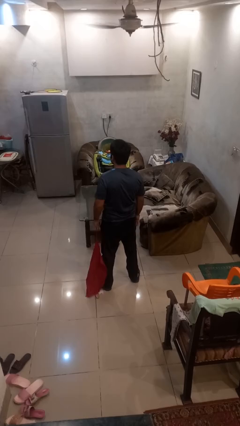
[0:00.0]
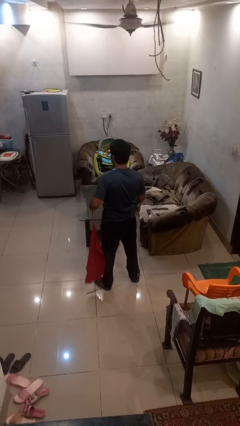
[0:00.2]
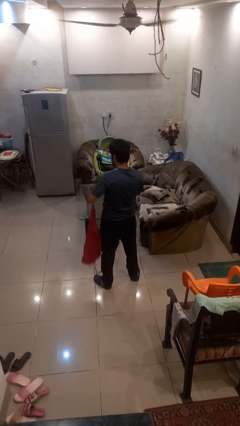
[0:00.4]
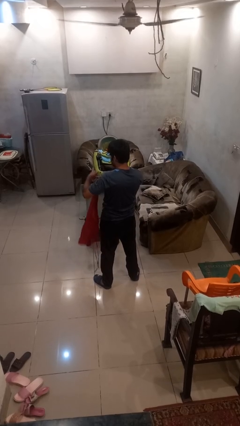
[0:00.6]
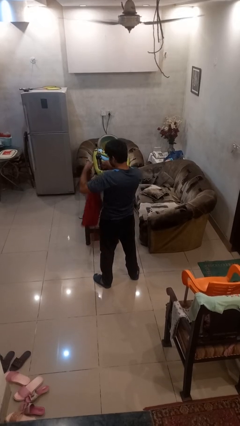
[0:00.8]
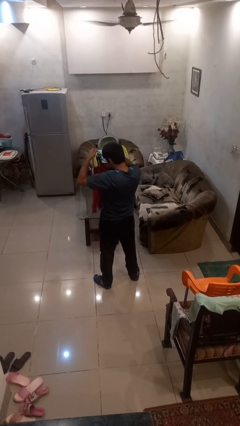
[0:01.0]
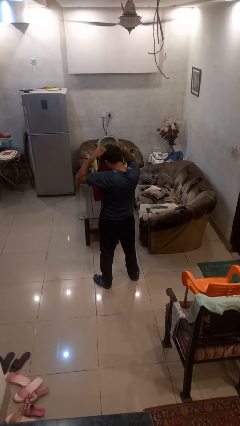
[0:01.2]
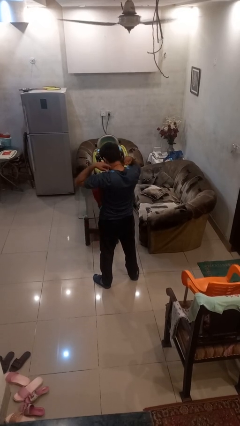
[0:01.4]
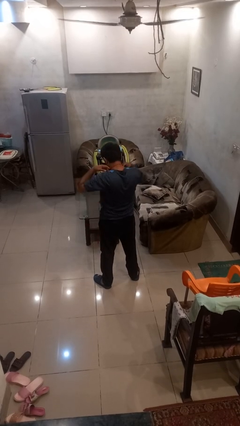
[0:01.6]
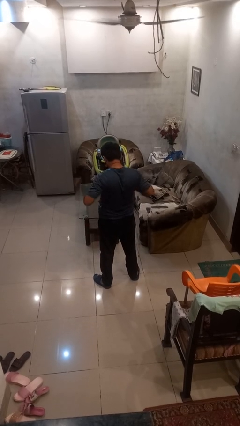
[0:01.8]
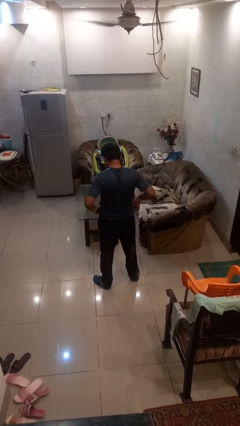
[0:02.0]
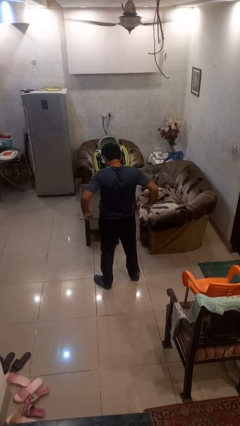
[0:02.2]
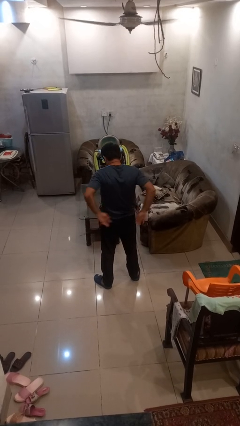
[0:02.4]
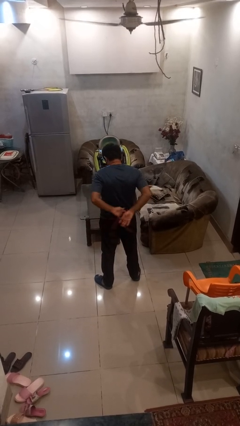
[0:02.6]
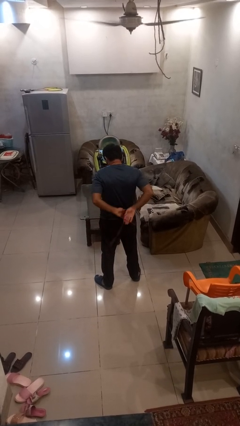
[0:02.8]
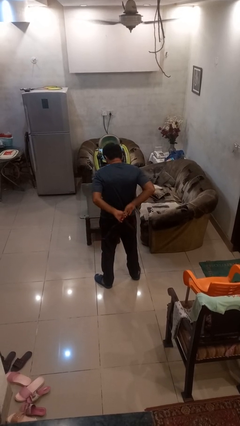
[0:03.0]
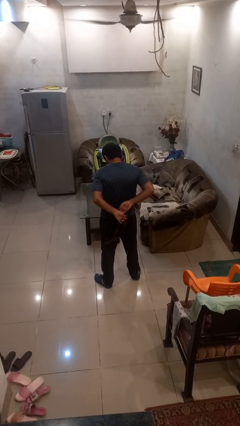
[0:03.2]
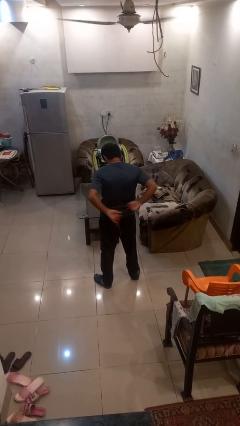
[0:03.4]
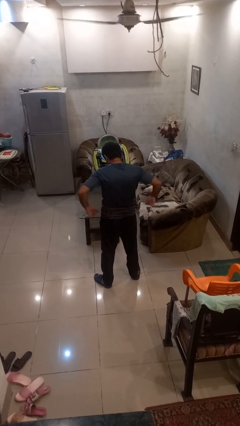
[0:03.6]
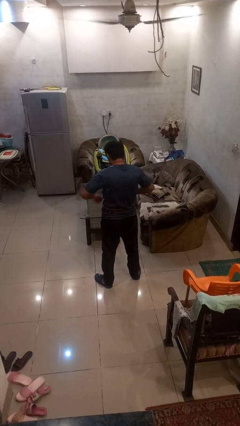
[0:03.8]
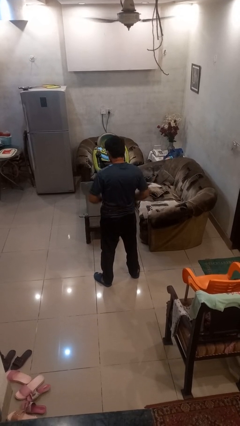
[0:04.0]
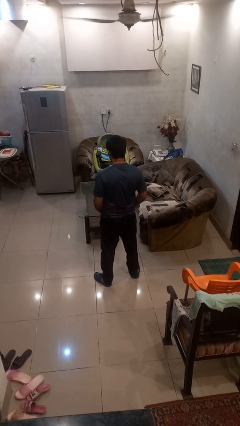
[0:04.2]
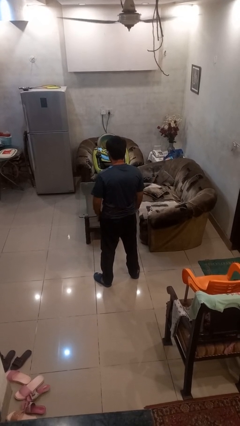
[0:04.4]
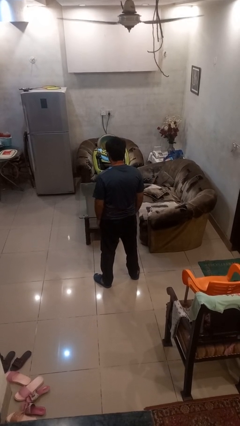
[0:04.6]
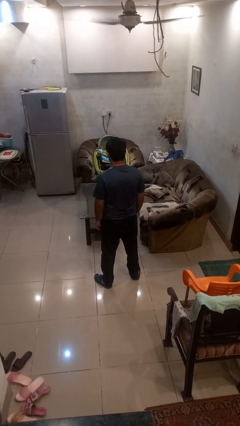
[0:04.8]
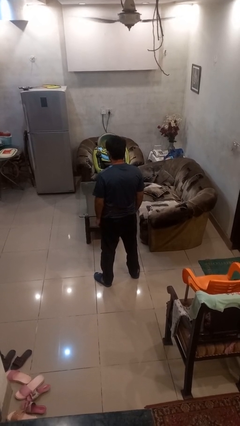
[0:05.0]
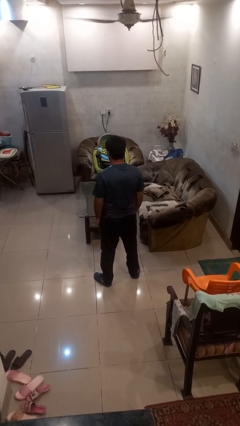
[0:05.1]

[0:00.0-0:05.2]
person puts on apron

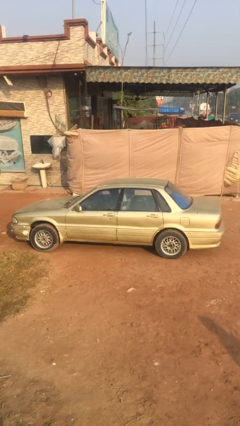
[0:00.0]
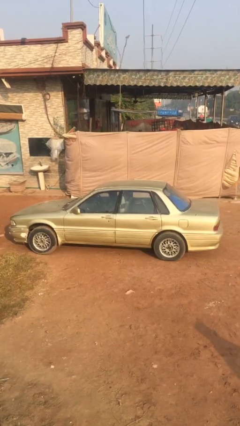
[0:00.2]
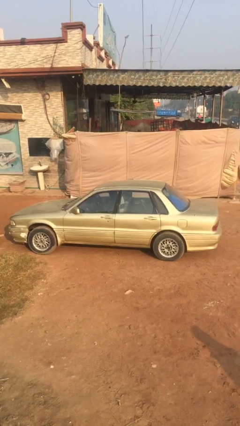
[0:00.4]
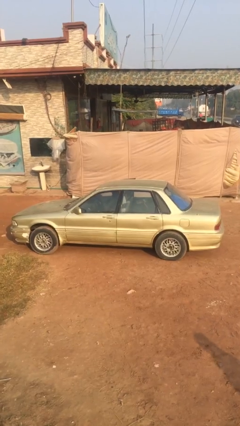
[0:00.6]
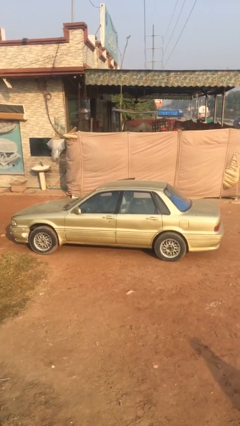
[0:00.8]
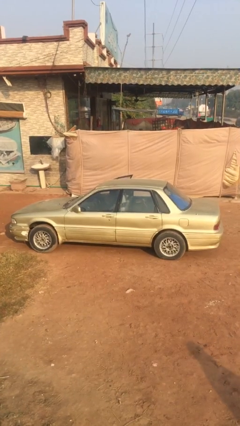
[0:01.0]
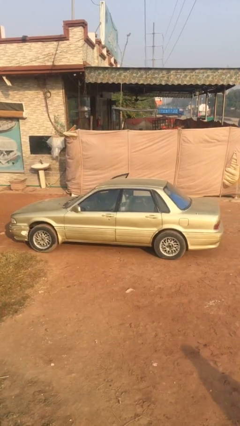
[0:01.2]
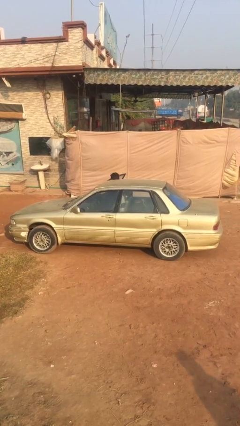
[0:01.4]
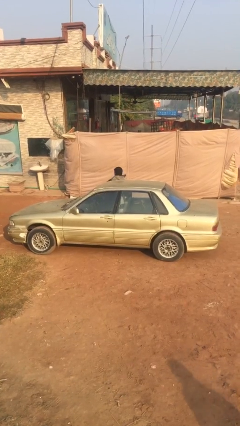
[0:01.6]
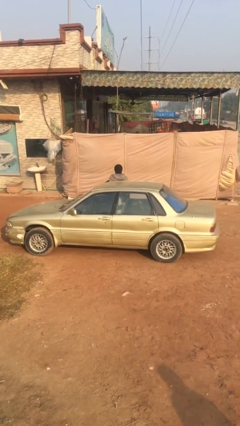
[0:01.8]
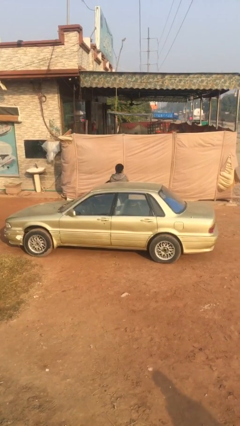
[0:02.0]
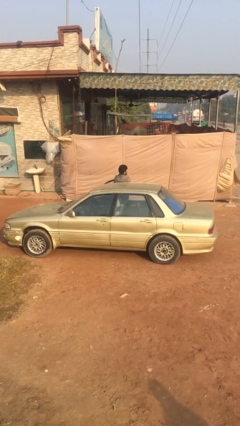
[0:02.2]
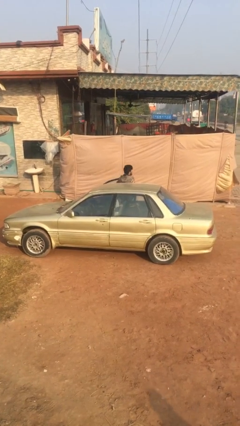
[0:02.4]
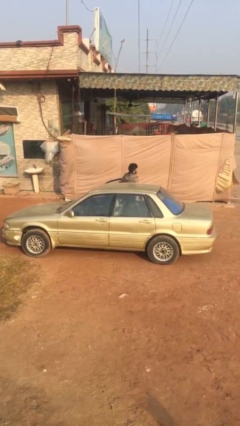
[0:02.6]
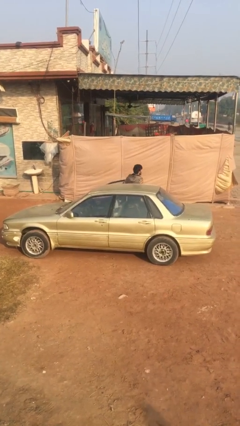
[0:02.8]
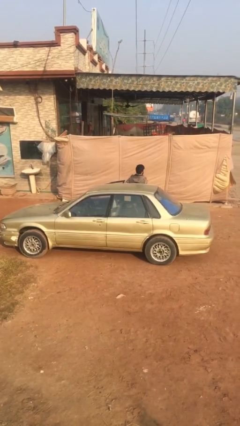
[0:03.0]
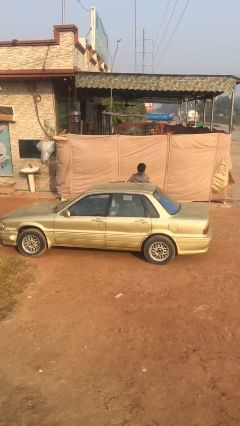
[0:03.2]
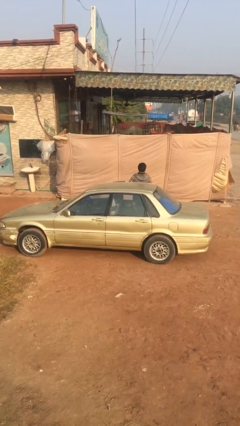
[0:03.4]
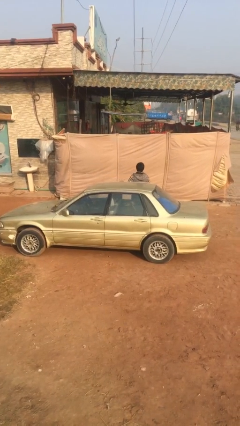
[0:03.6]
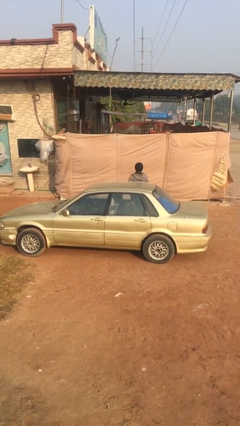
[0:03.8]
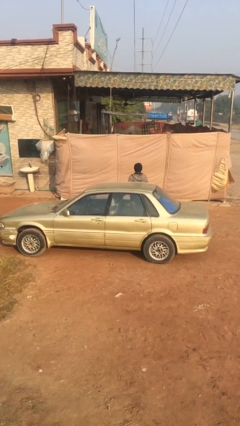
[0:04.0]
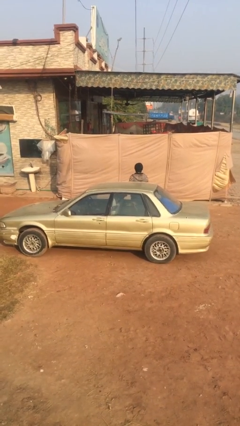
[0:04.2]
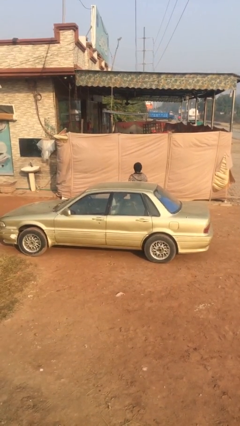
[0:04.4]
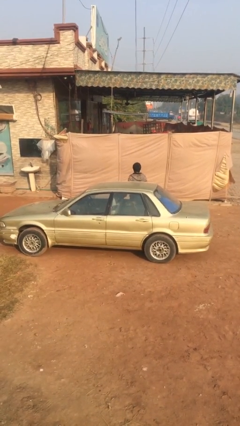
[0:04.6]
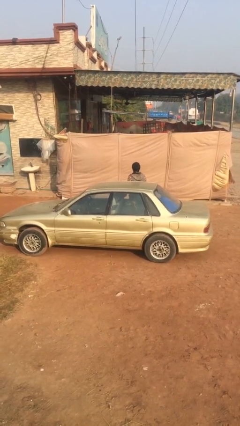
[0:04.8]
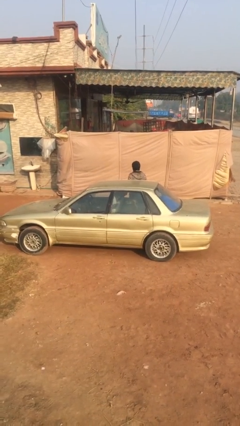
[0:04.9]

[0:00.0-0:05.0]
car drops off person

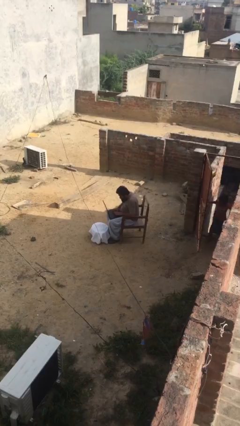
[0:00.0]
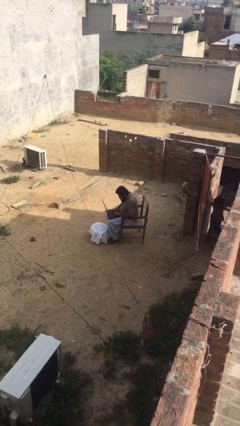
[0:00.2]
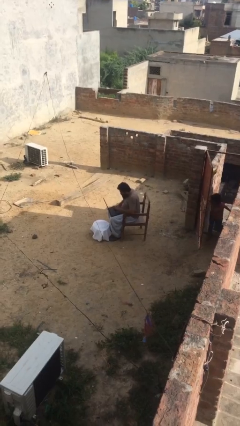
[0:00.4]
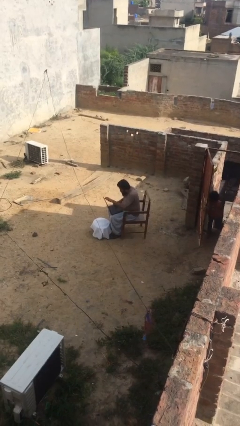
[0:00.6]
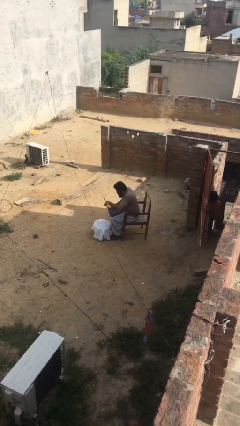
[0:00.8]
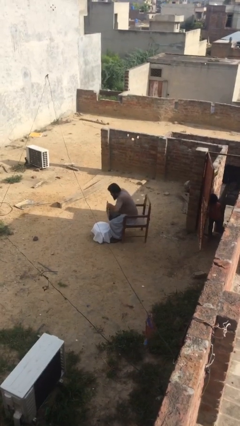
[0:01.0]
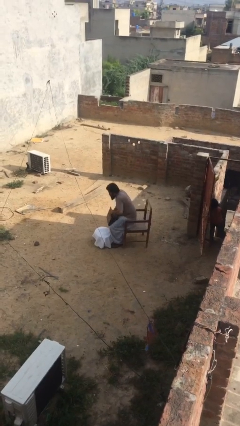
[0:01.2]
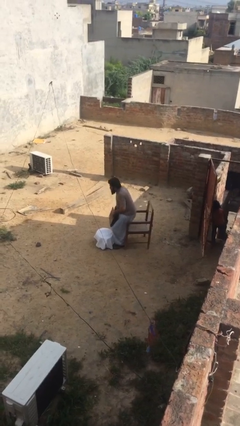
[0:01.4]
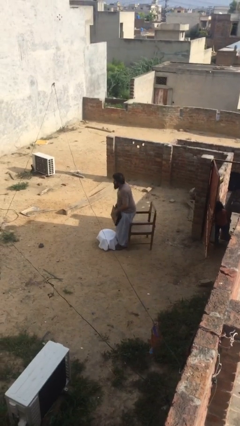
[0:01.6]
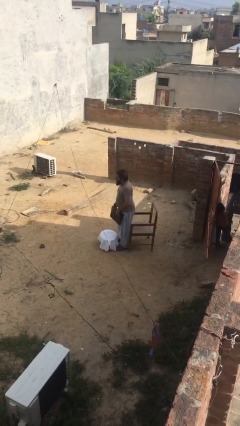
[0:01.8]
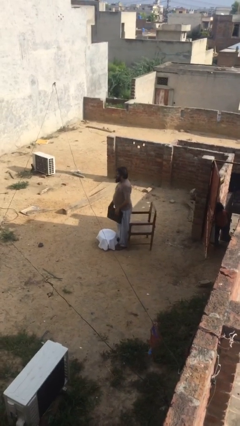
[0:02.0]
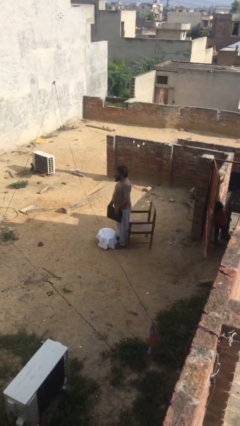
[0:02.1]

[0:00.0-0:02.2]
person stands up

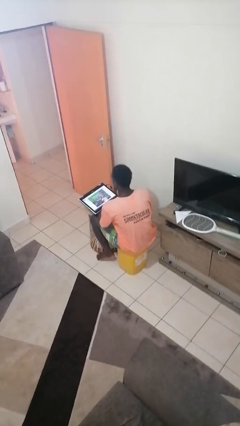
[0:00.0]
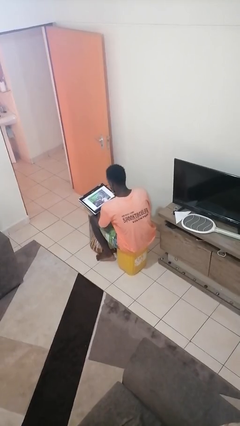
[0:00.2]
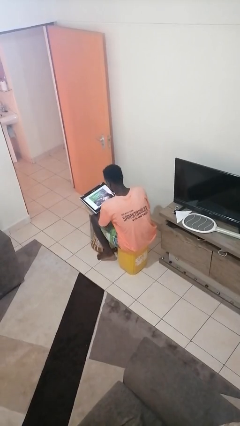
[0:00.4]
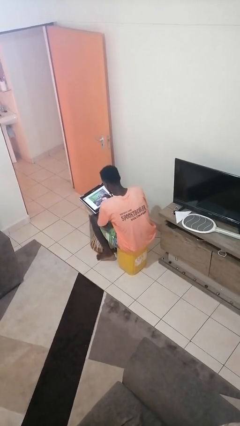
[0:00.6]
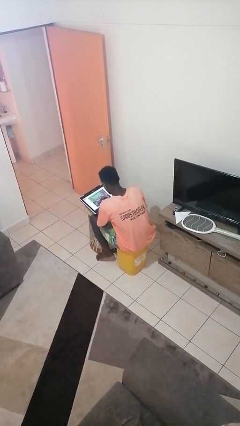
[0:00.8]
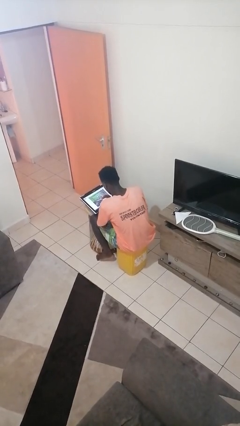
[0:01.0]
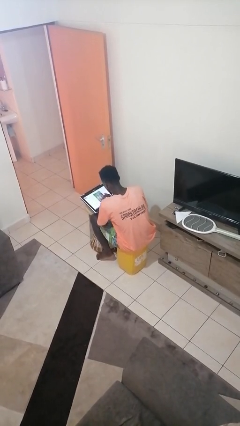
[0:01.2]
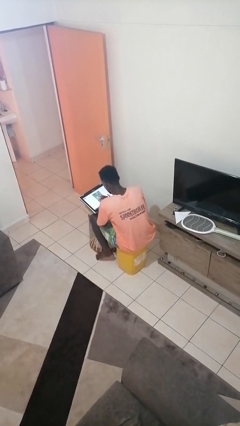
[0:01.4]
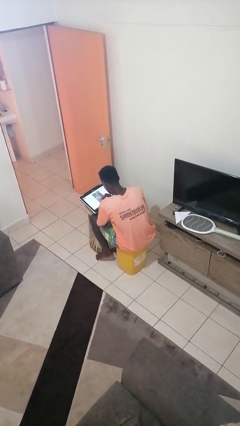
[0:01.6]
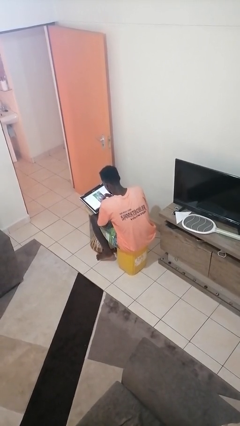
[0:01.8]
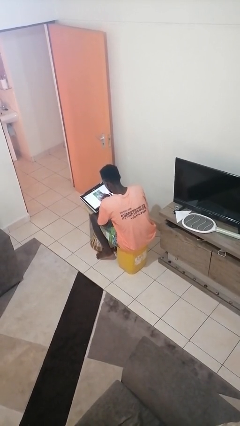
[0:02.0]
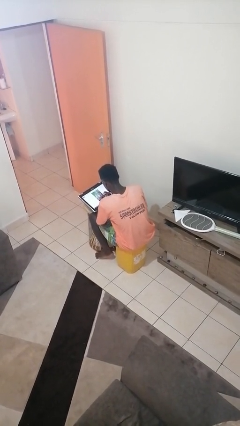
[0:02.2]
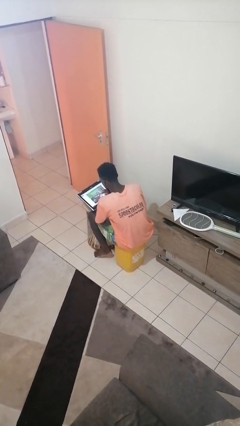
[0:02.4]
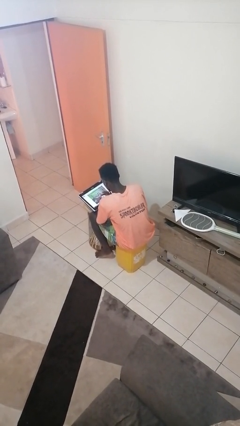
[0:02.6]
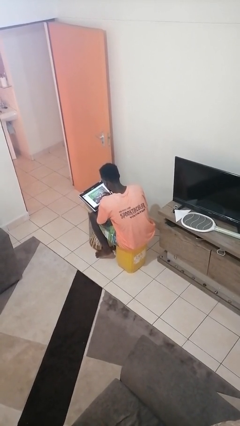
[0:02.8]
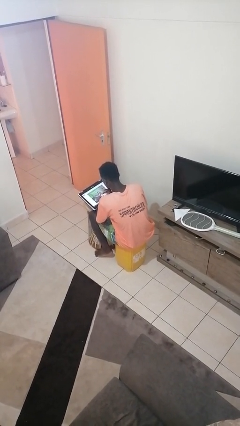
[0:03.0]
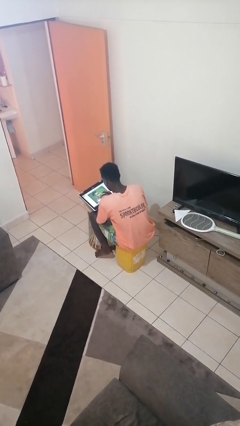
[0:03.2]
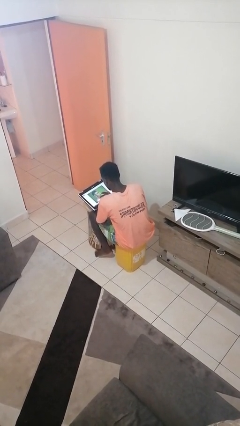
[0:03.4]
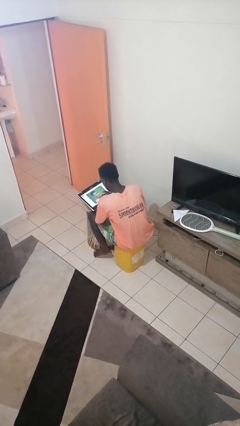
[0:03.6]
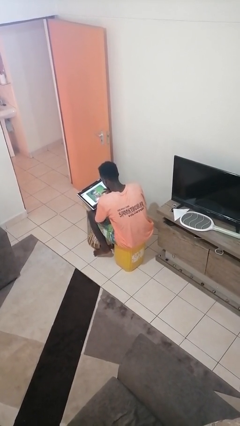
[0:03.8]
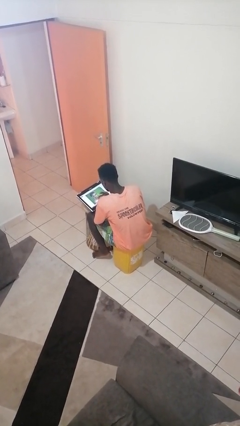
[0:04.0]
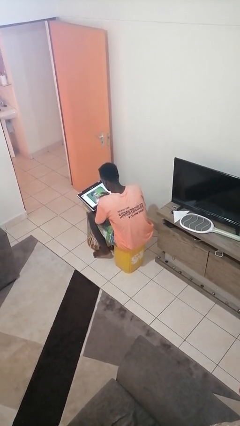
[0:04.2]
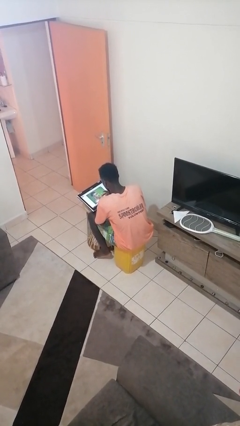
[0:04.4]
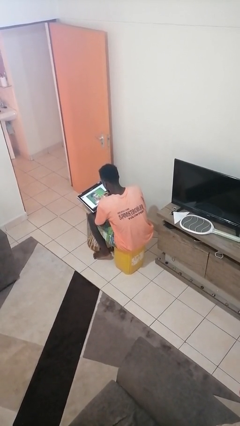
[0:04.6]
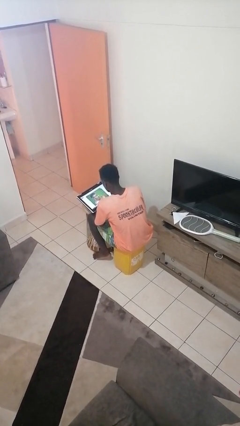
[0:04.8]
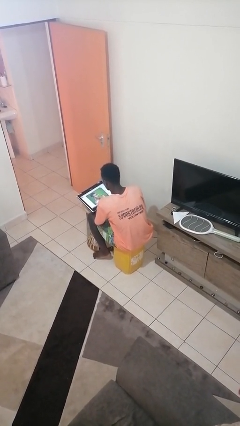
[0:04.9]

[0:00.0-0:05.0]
person interacts with tablet
